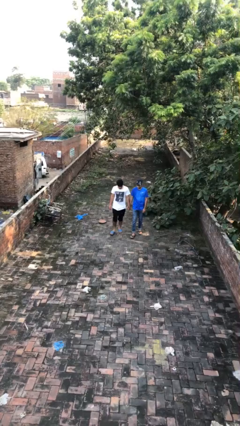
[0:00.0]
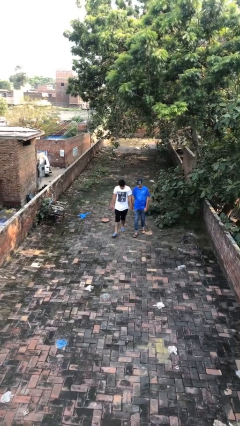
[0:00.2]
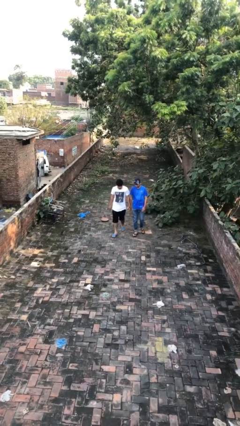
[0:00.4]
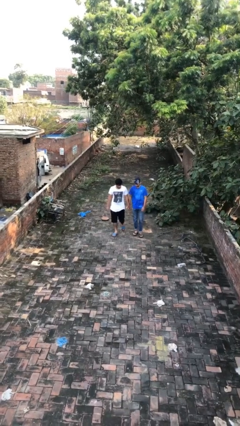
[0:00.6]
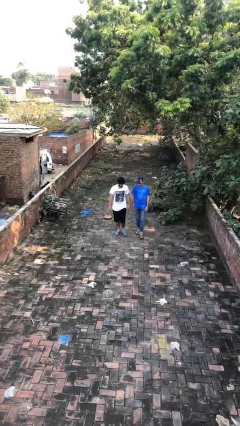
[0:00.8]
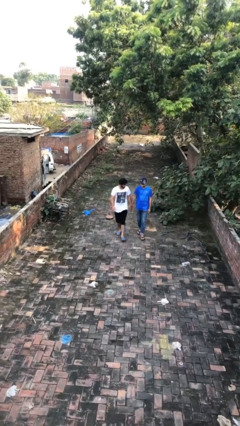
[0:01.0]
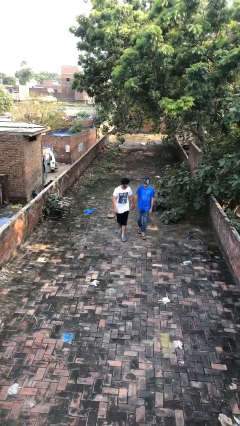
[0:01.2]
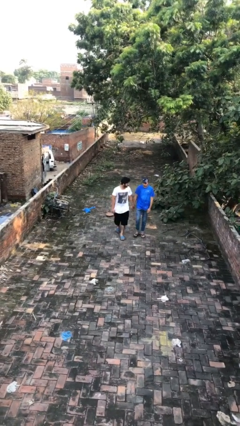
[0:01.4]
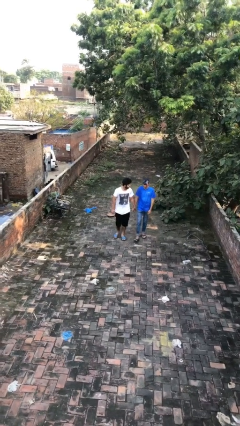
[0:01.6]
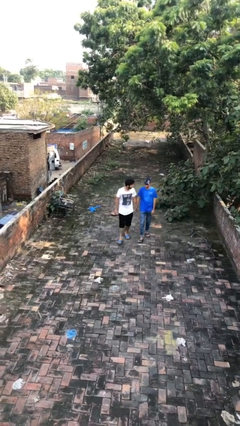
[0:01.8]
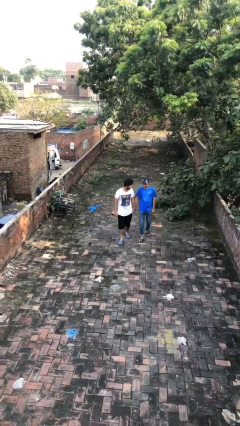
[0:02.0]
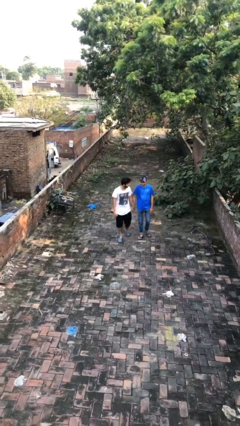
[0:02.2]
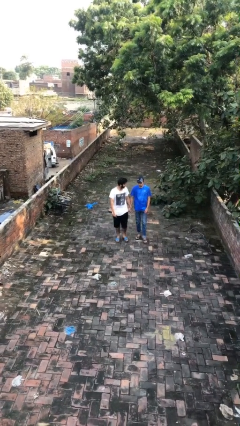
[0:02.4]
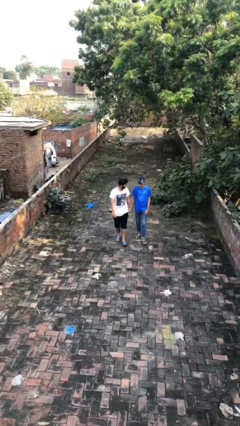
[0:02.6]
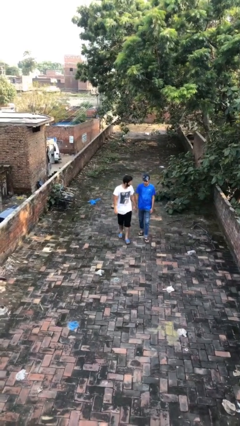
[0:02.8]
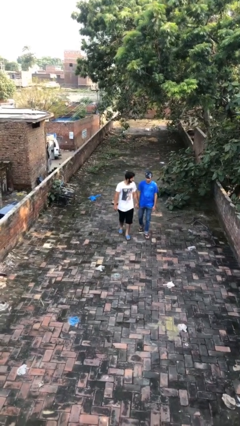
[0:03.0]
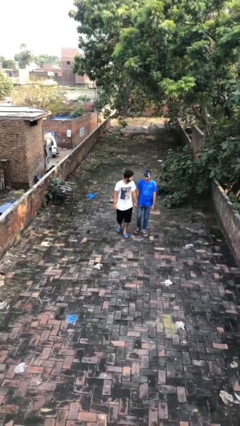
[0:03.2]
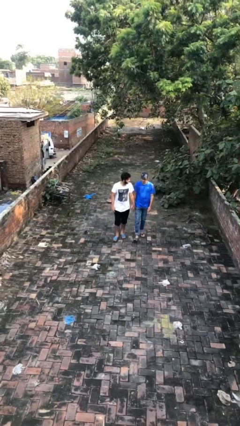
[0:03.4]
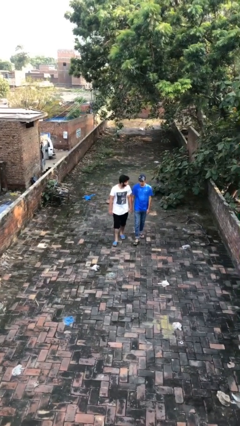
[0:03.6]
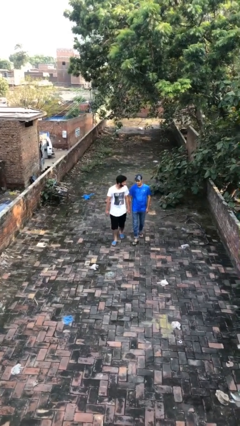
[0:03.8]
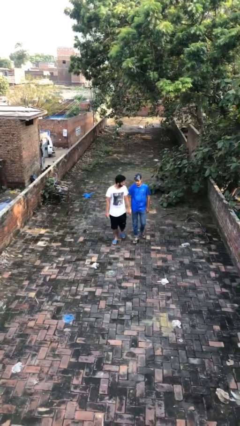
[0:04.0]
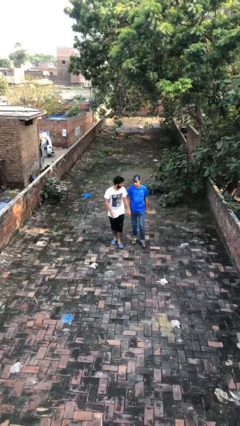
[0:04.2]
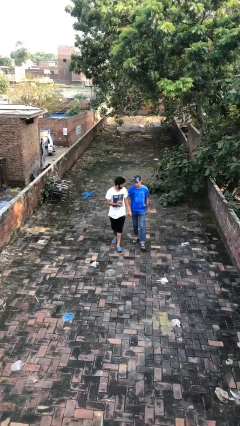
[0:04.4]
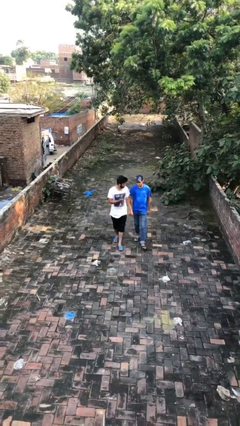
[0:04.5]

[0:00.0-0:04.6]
person holds hand

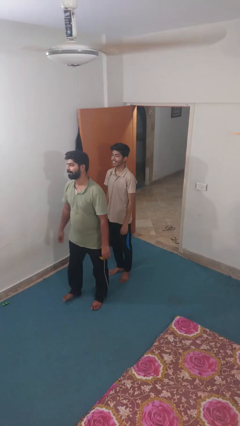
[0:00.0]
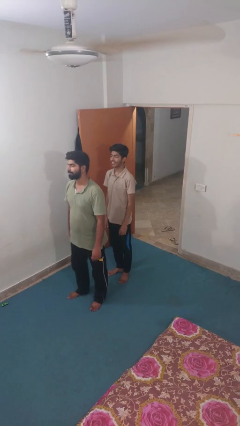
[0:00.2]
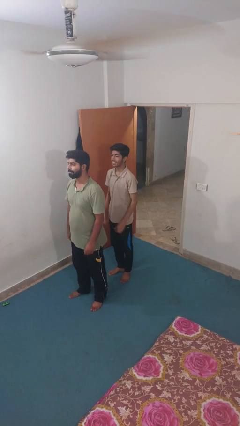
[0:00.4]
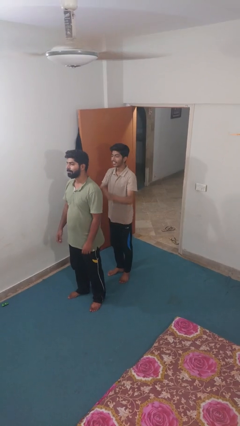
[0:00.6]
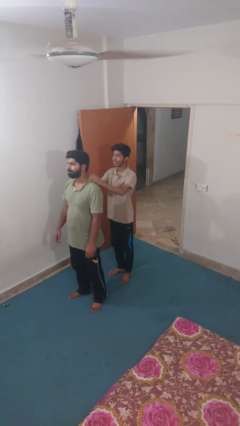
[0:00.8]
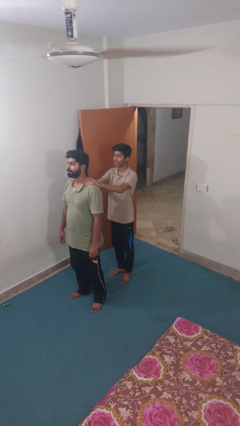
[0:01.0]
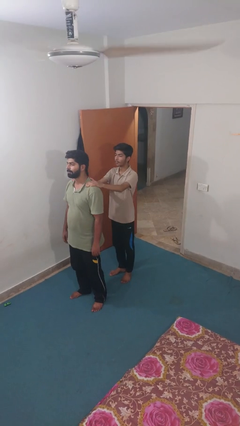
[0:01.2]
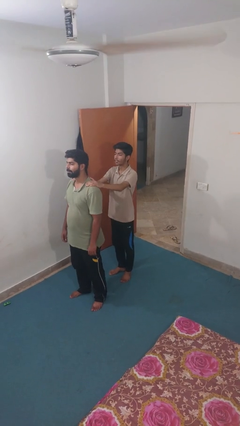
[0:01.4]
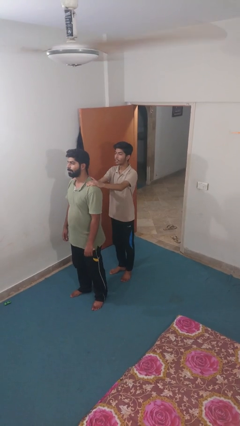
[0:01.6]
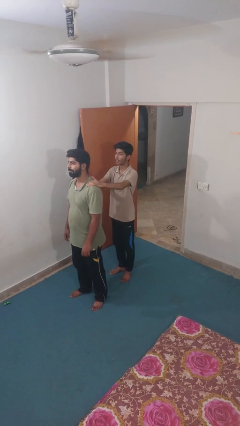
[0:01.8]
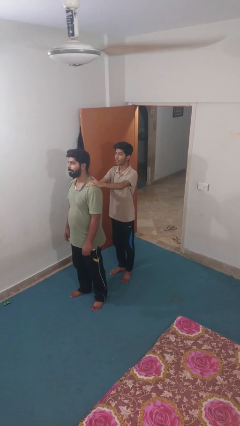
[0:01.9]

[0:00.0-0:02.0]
person grabs person by shoulder

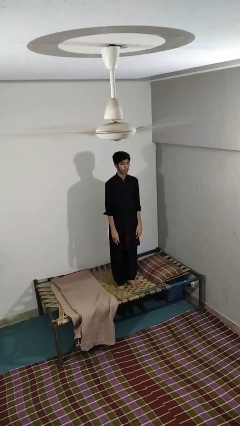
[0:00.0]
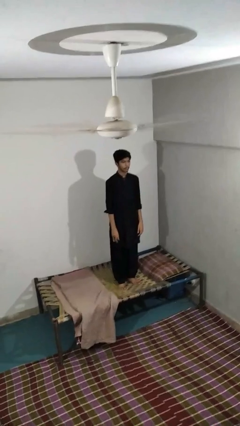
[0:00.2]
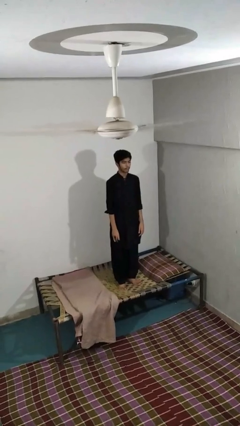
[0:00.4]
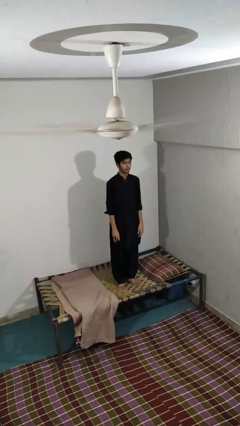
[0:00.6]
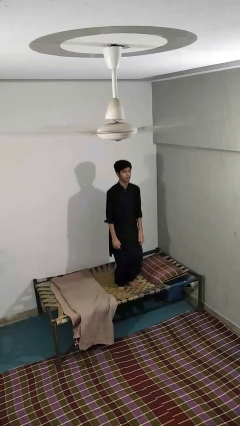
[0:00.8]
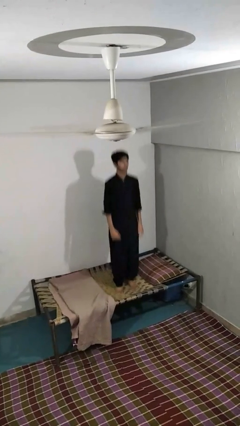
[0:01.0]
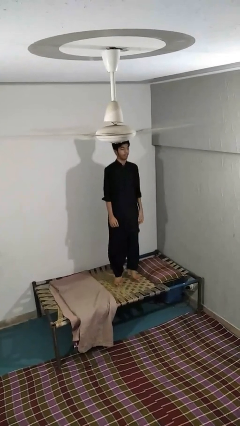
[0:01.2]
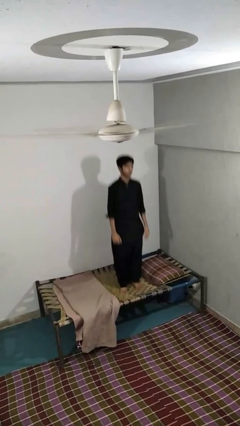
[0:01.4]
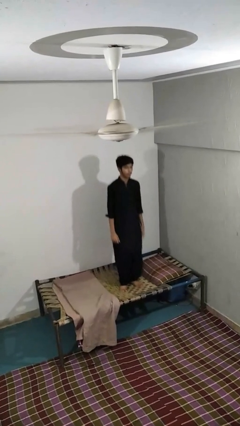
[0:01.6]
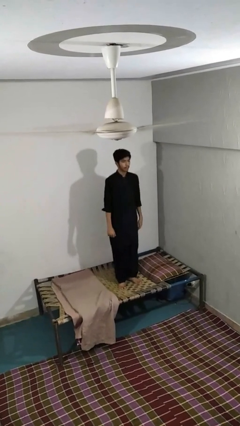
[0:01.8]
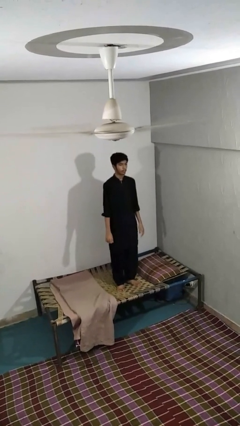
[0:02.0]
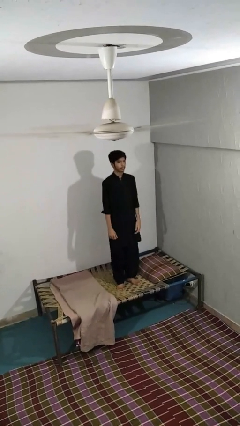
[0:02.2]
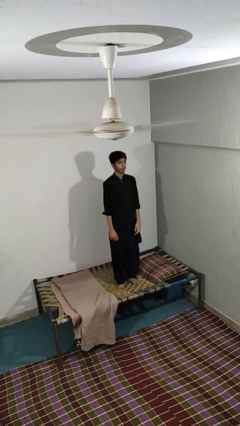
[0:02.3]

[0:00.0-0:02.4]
person jumps on bed

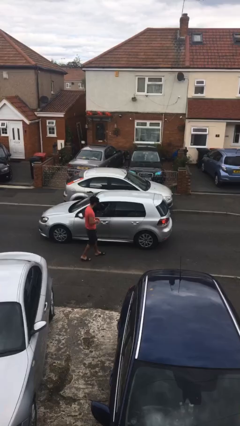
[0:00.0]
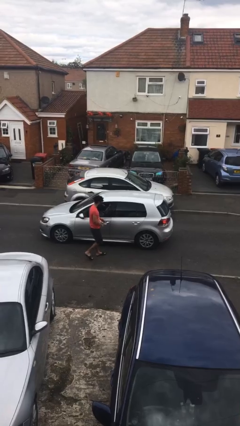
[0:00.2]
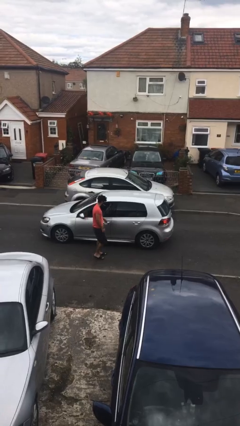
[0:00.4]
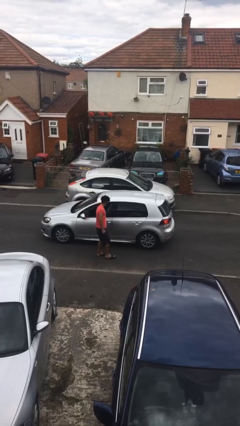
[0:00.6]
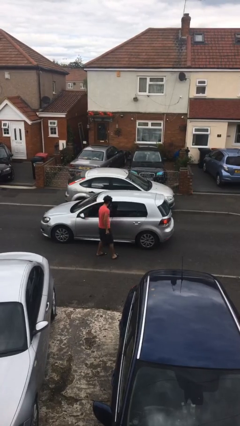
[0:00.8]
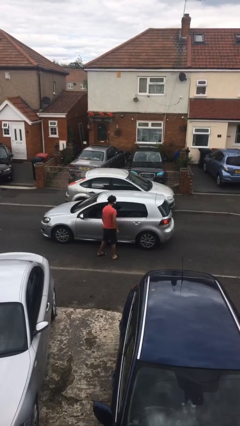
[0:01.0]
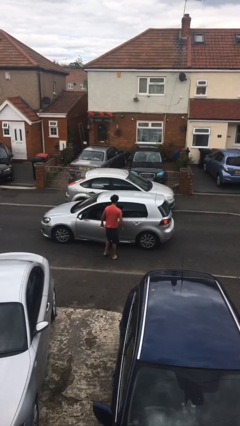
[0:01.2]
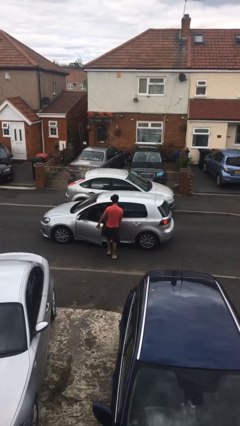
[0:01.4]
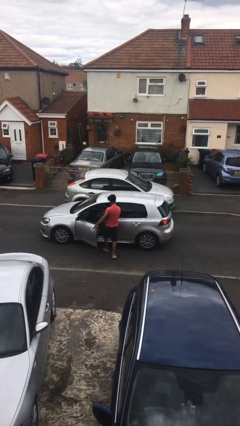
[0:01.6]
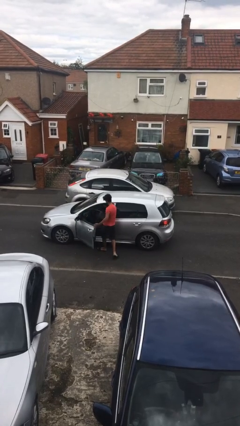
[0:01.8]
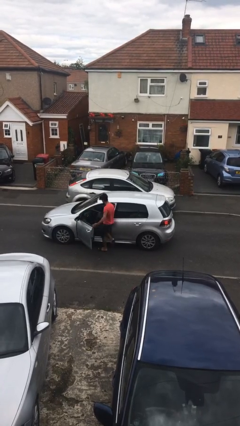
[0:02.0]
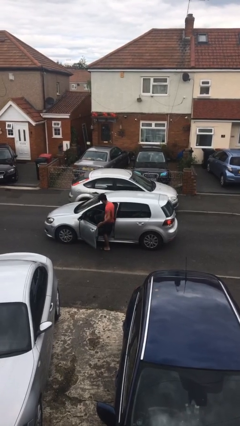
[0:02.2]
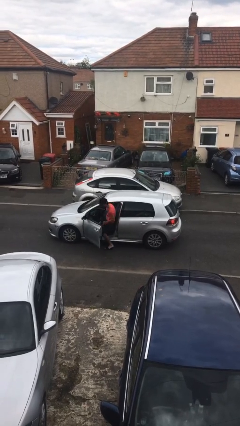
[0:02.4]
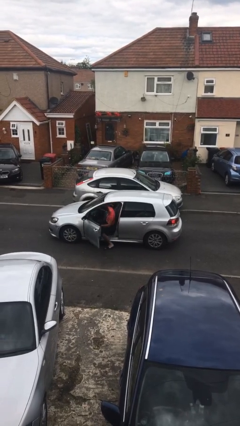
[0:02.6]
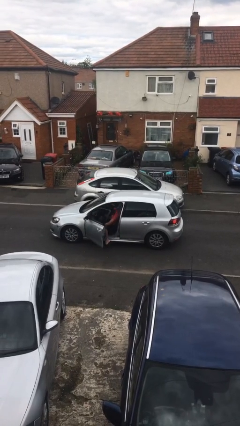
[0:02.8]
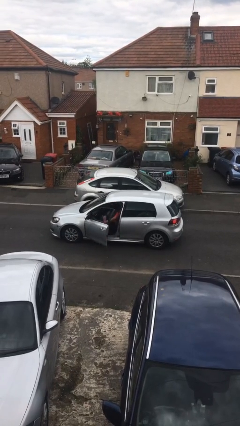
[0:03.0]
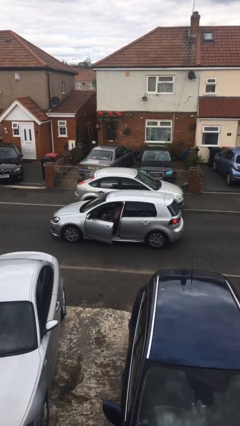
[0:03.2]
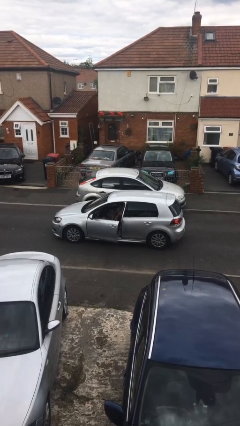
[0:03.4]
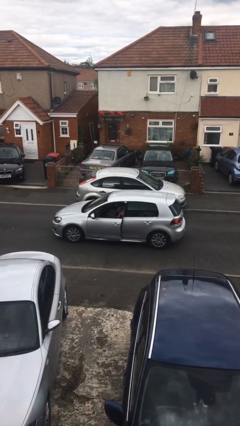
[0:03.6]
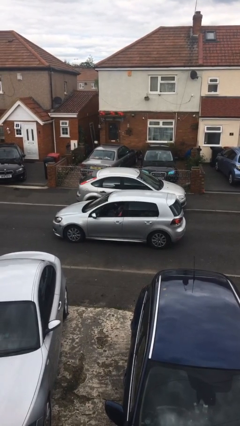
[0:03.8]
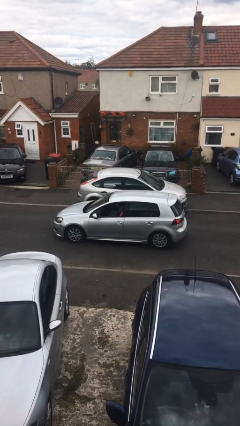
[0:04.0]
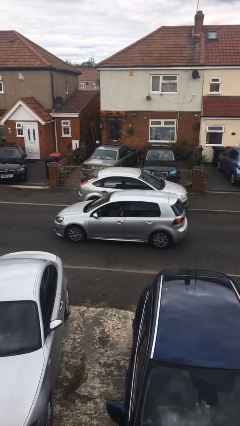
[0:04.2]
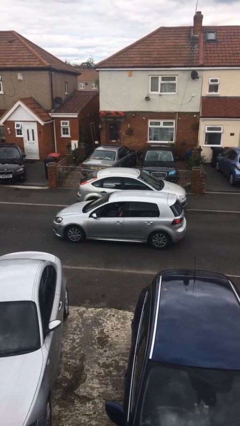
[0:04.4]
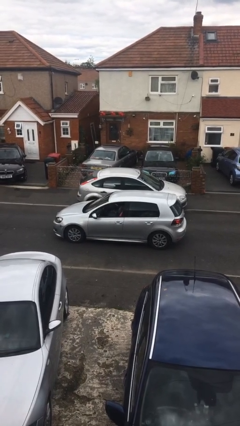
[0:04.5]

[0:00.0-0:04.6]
car picks up person

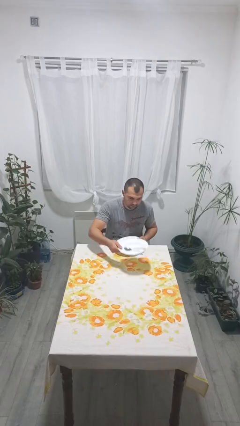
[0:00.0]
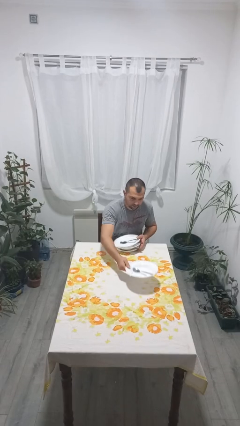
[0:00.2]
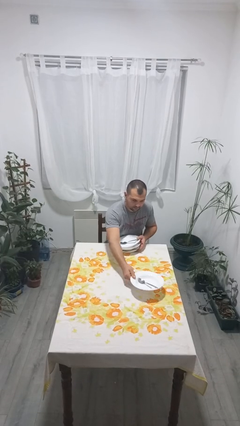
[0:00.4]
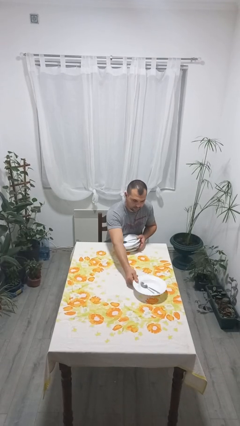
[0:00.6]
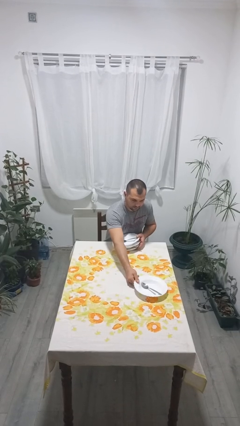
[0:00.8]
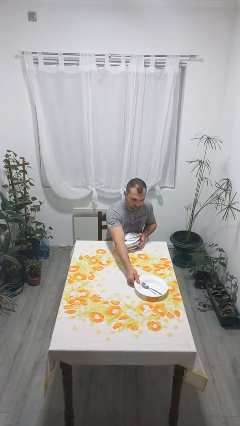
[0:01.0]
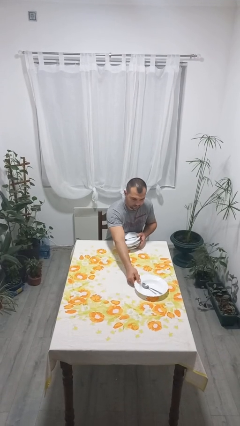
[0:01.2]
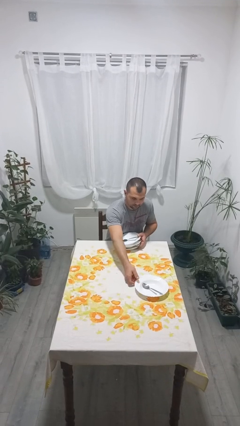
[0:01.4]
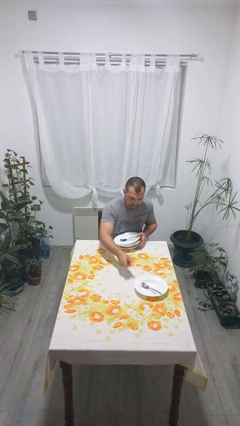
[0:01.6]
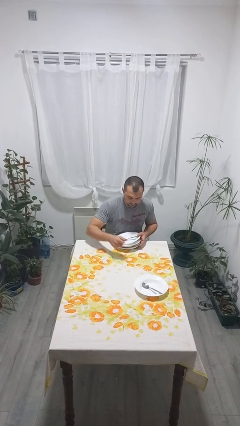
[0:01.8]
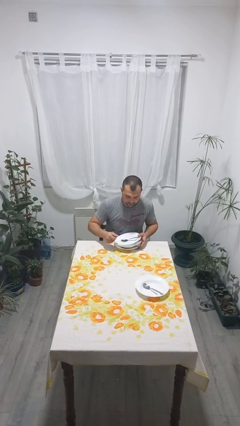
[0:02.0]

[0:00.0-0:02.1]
person sets table

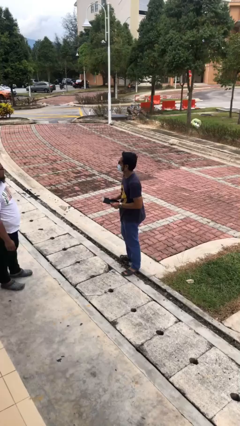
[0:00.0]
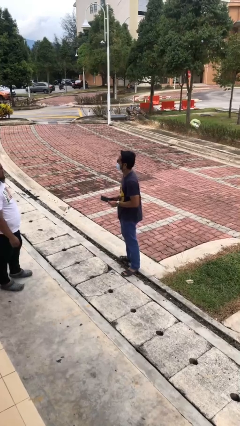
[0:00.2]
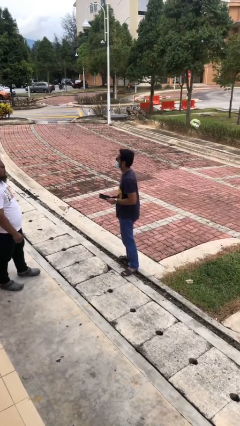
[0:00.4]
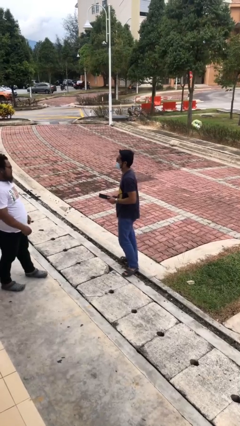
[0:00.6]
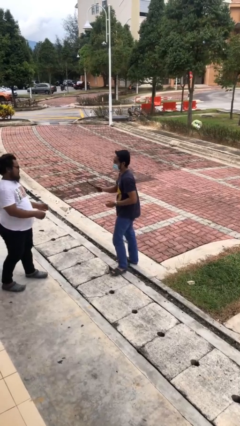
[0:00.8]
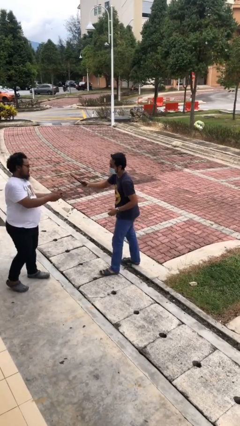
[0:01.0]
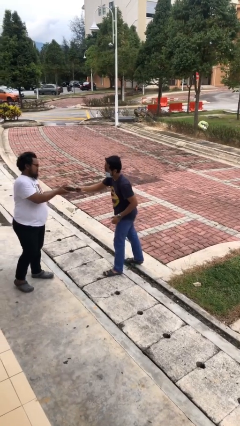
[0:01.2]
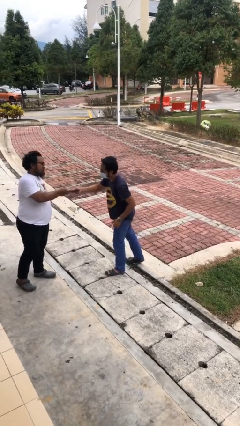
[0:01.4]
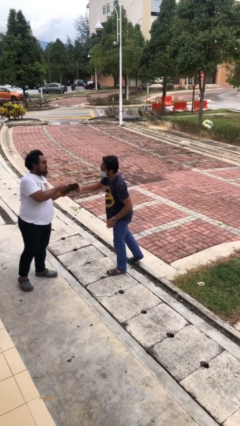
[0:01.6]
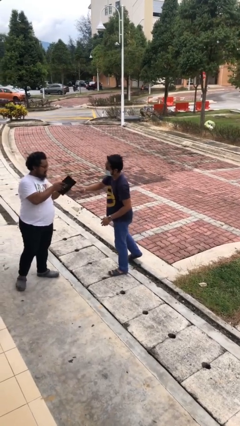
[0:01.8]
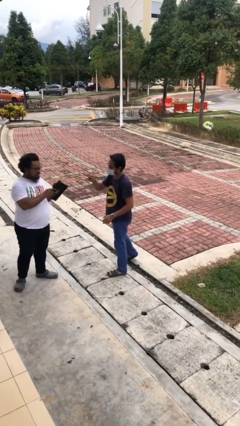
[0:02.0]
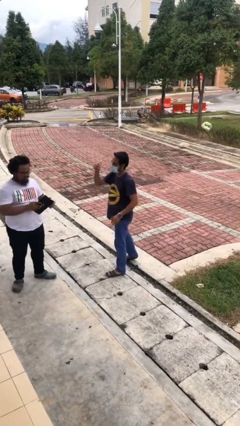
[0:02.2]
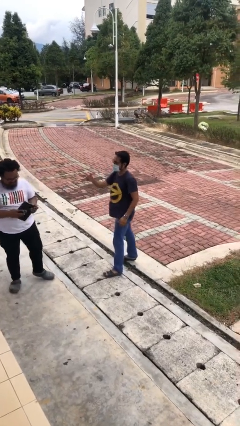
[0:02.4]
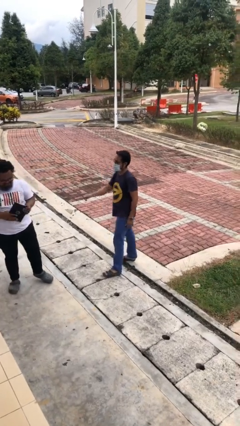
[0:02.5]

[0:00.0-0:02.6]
person transfers object to person
